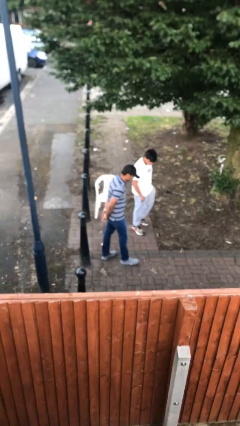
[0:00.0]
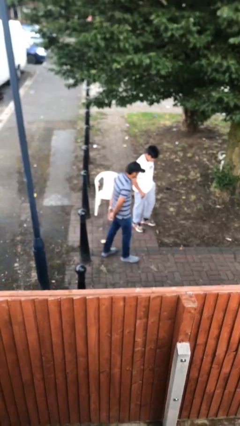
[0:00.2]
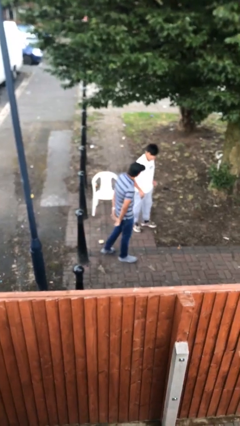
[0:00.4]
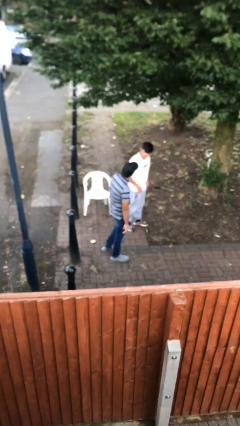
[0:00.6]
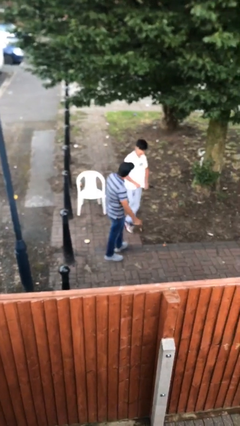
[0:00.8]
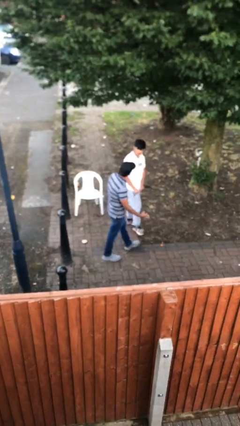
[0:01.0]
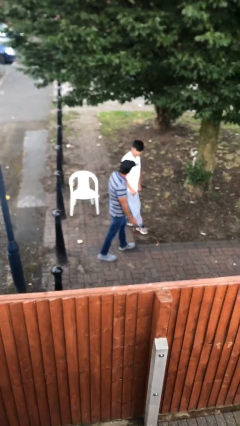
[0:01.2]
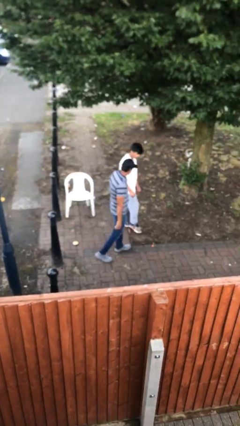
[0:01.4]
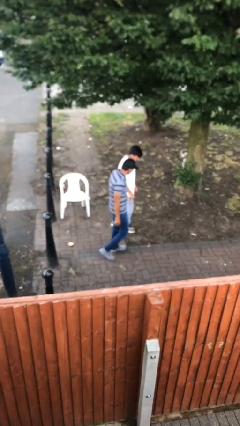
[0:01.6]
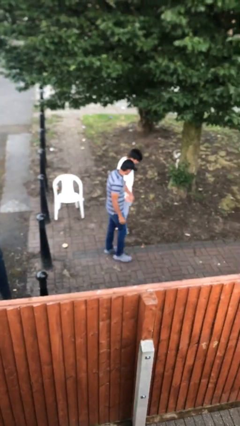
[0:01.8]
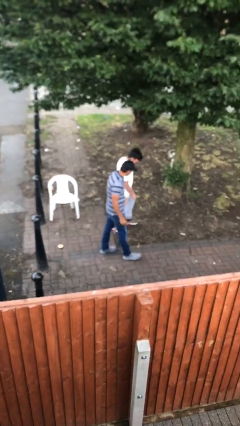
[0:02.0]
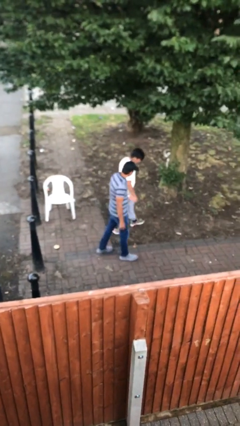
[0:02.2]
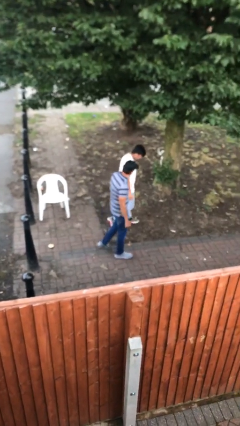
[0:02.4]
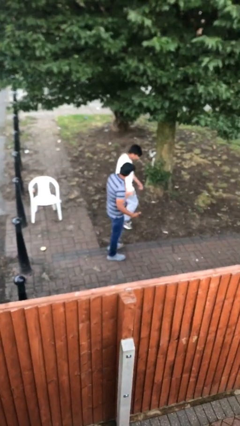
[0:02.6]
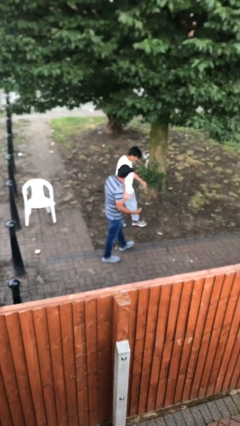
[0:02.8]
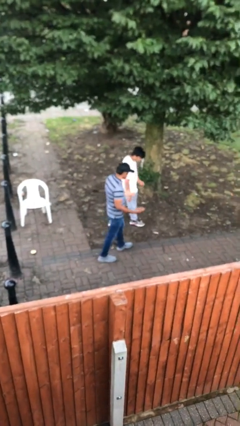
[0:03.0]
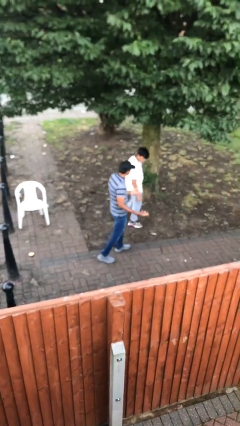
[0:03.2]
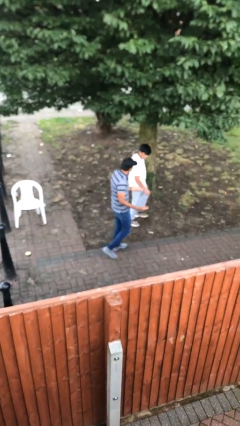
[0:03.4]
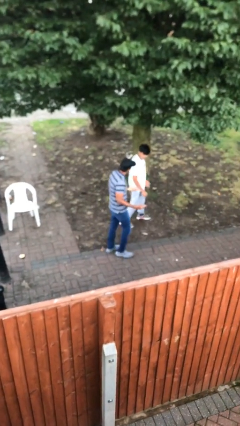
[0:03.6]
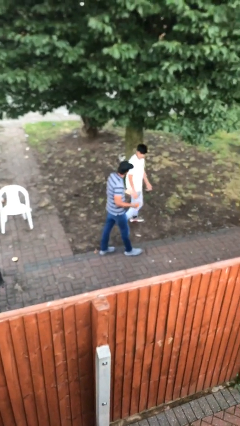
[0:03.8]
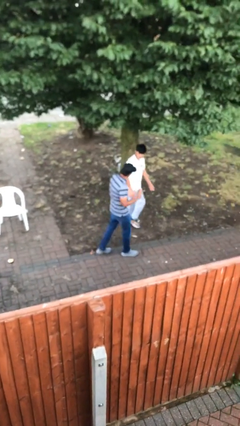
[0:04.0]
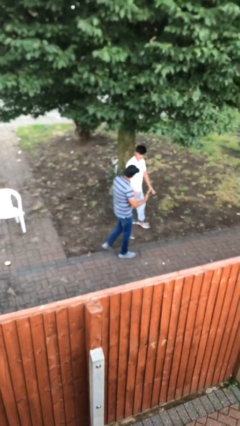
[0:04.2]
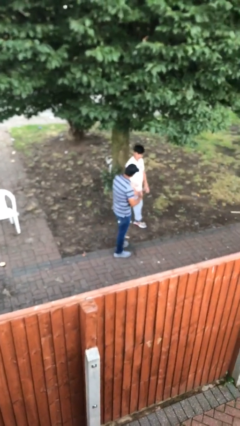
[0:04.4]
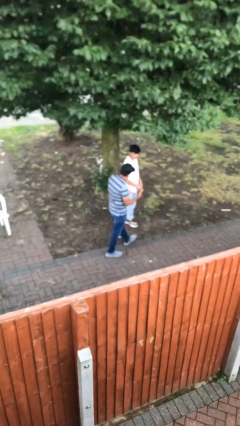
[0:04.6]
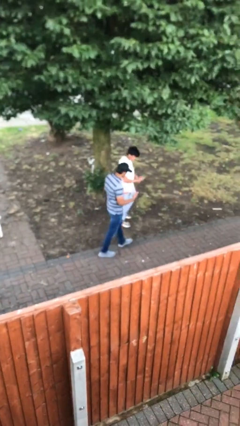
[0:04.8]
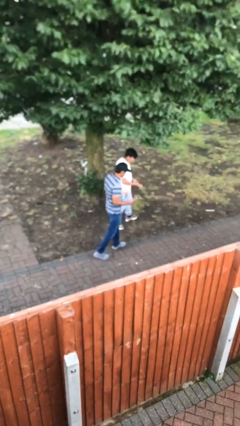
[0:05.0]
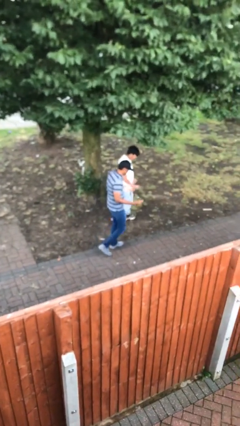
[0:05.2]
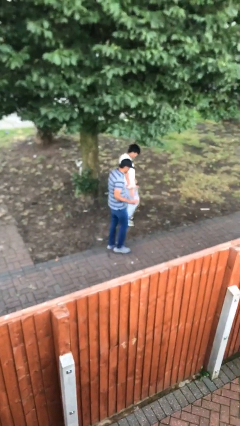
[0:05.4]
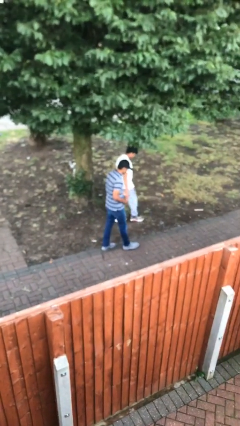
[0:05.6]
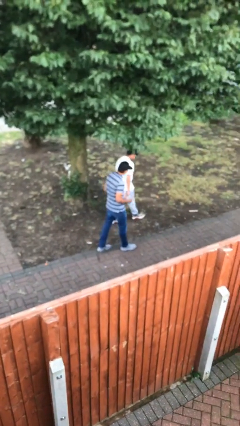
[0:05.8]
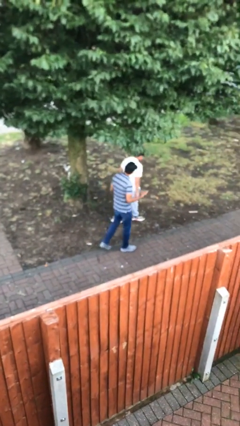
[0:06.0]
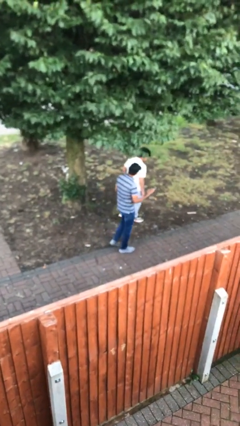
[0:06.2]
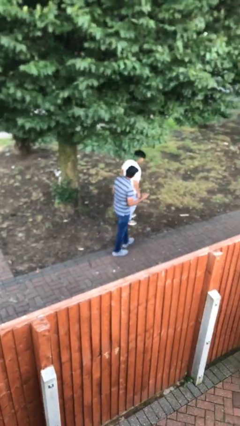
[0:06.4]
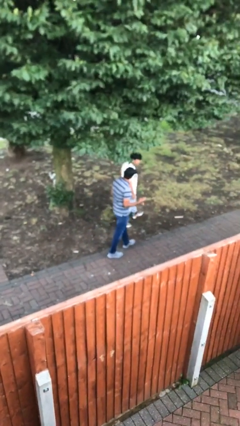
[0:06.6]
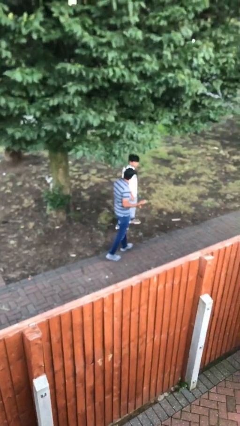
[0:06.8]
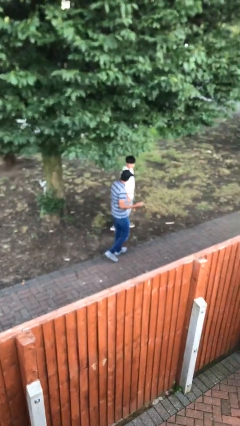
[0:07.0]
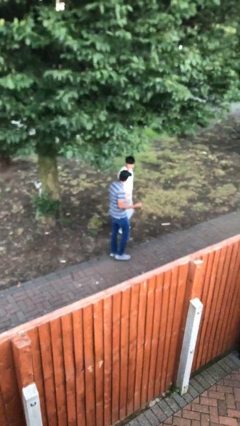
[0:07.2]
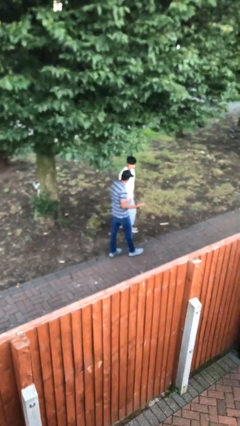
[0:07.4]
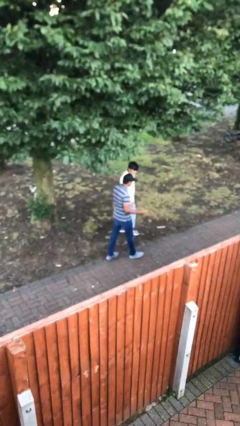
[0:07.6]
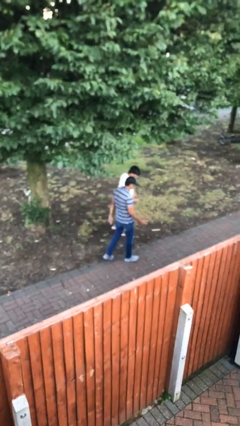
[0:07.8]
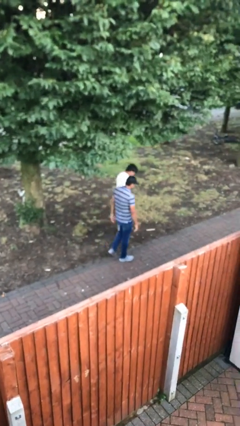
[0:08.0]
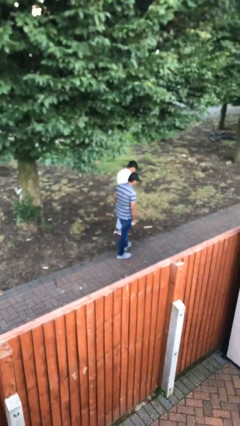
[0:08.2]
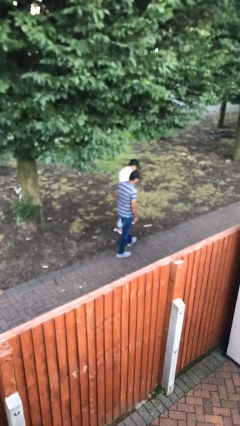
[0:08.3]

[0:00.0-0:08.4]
person talks to person

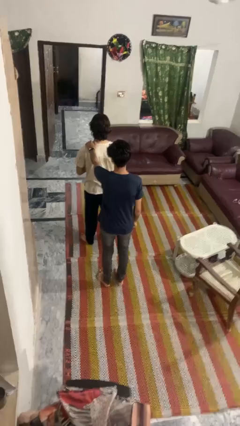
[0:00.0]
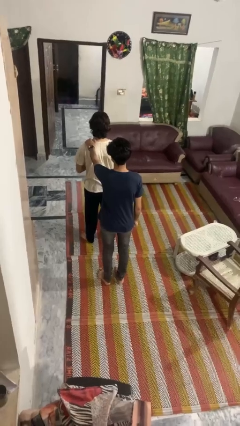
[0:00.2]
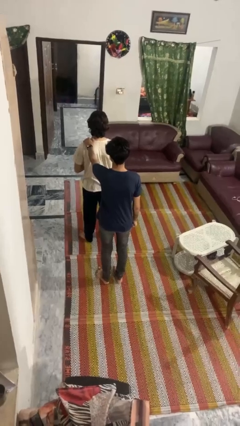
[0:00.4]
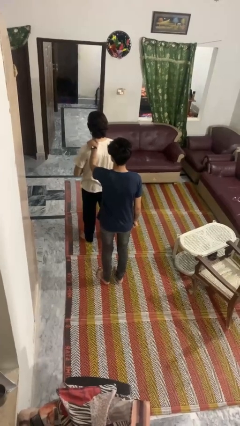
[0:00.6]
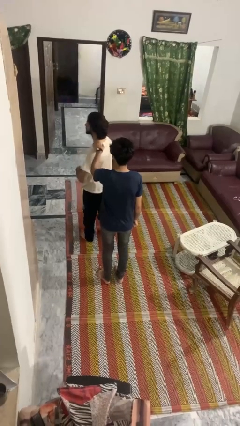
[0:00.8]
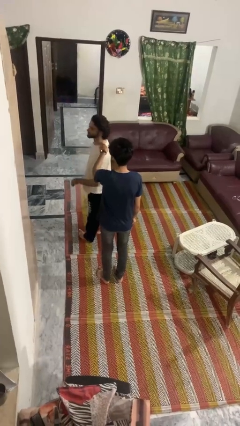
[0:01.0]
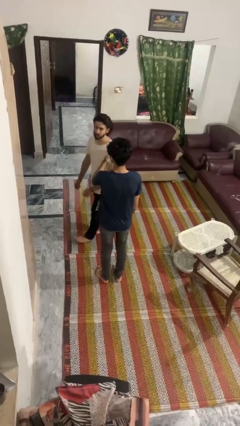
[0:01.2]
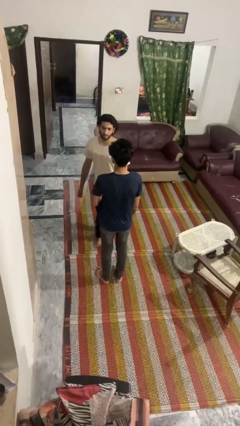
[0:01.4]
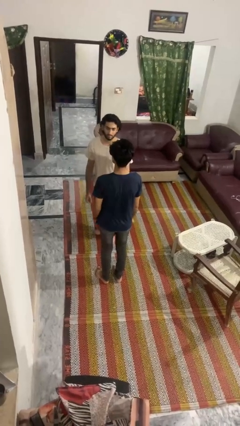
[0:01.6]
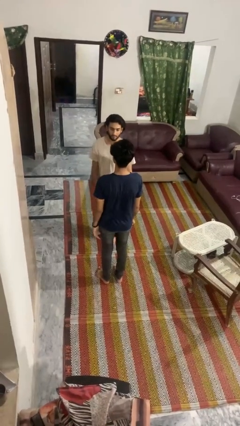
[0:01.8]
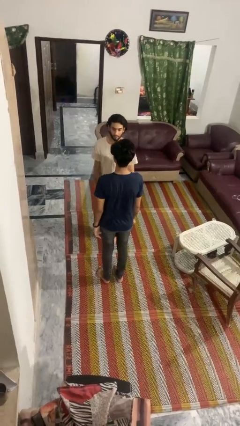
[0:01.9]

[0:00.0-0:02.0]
person spins person around

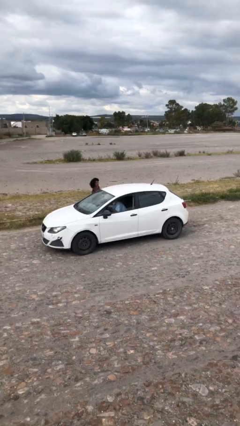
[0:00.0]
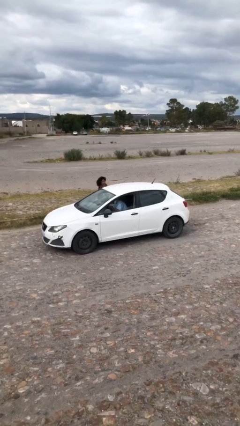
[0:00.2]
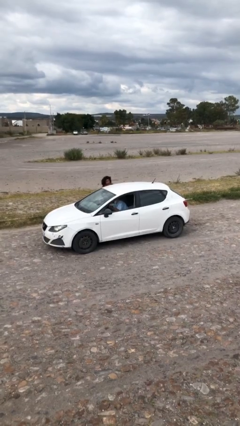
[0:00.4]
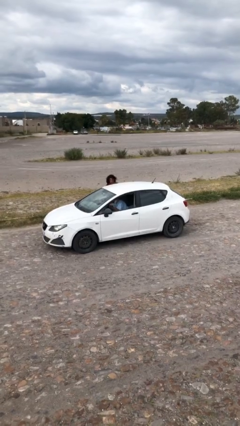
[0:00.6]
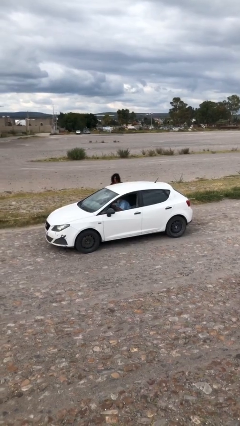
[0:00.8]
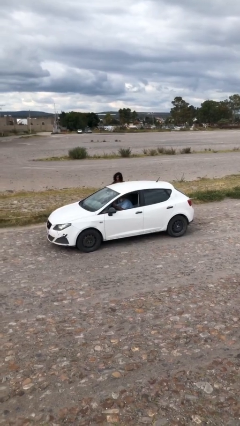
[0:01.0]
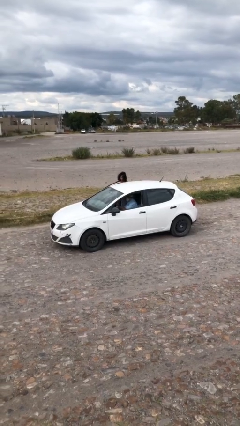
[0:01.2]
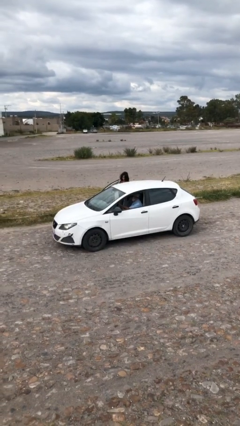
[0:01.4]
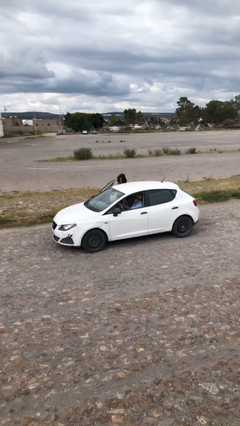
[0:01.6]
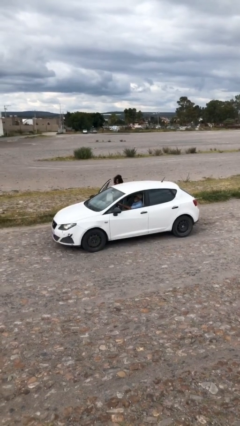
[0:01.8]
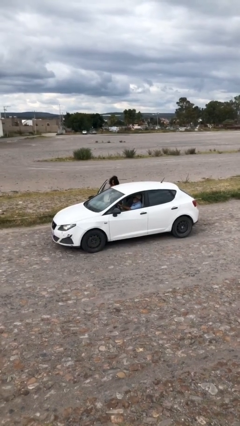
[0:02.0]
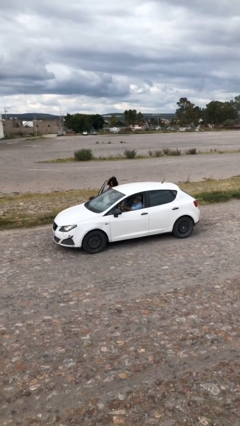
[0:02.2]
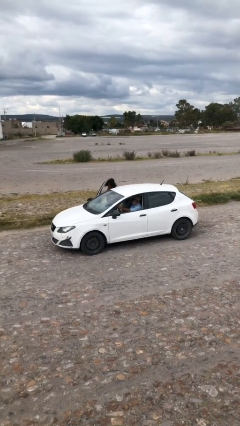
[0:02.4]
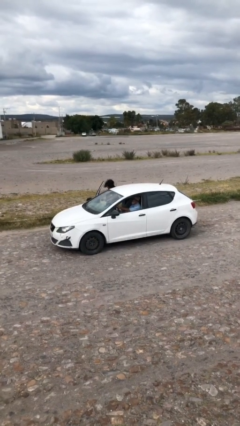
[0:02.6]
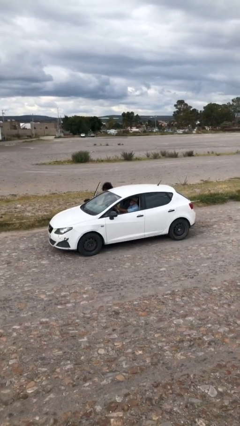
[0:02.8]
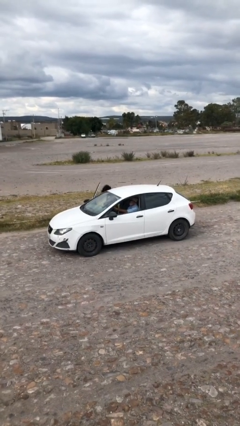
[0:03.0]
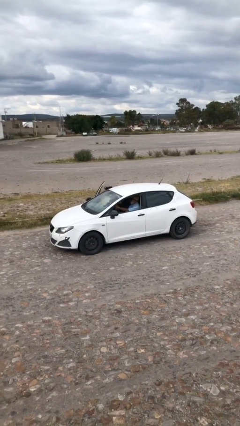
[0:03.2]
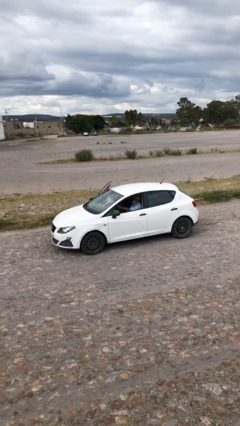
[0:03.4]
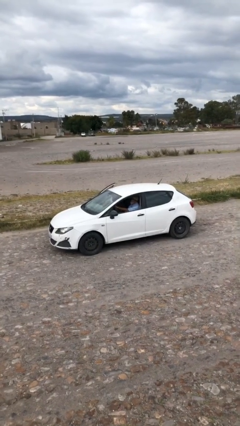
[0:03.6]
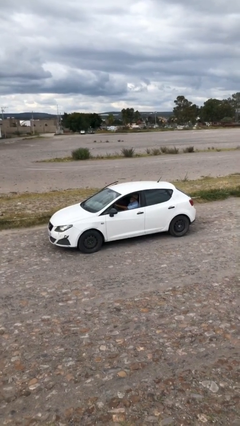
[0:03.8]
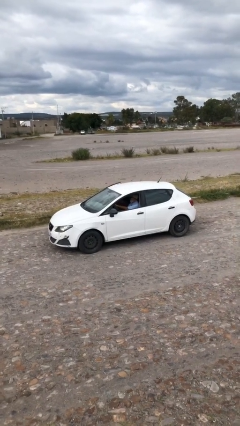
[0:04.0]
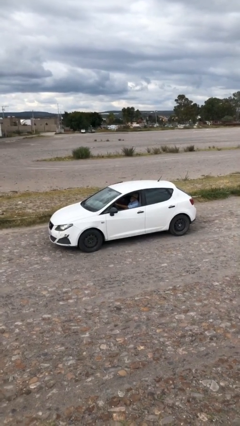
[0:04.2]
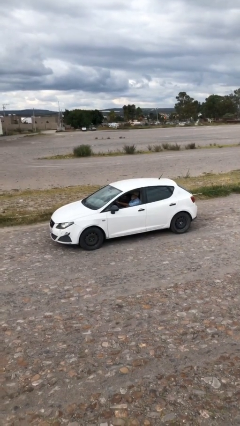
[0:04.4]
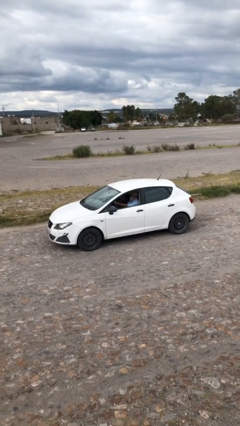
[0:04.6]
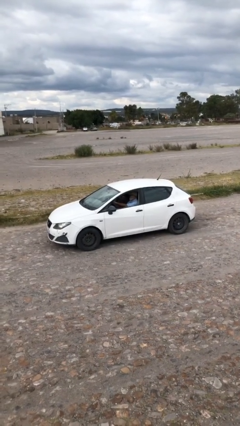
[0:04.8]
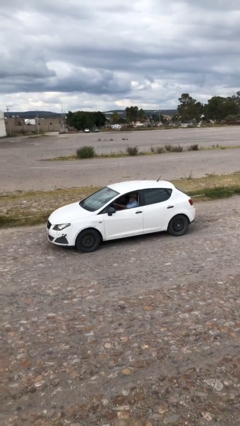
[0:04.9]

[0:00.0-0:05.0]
car picks up person

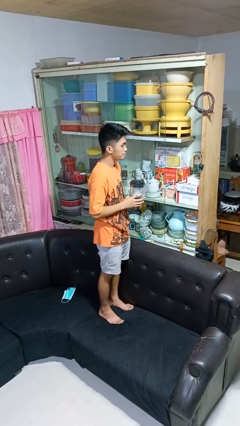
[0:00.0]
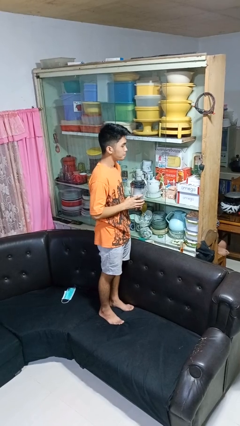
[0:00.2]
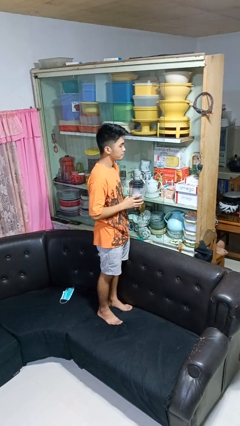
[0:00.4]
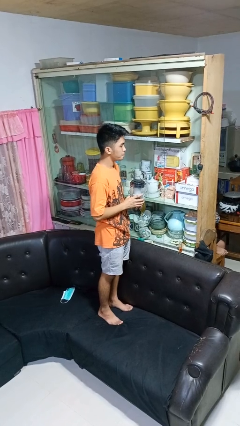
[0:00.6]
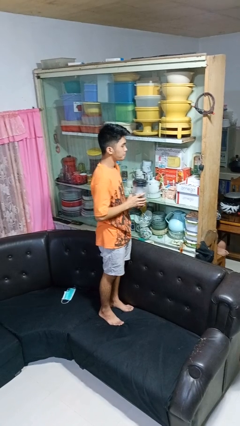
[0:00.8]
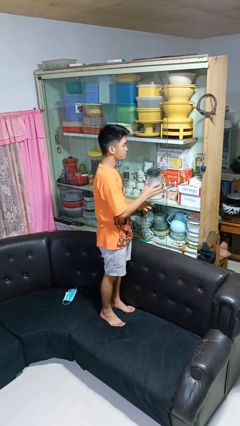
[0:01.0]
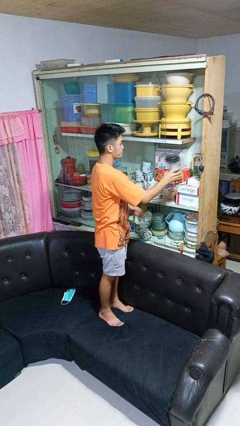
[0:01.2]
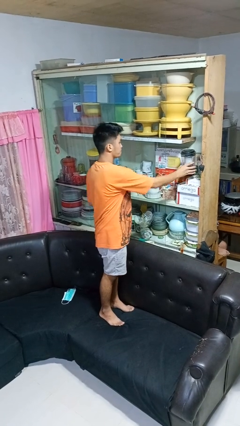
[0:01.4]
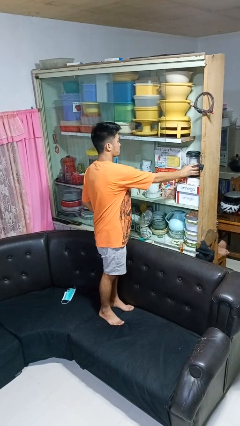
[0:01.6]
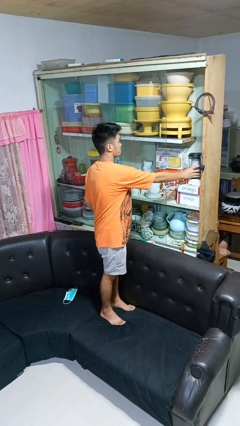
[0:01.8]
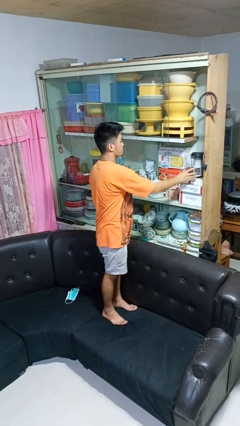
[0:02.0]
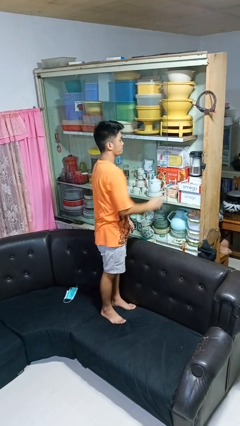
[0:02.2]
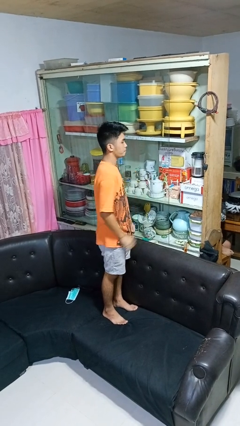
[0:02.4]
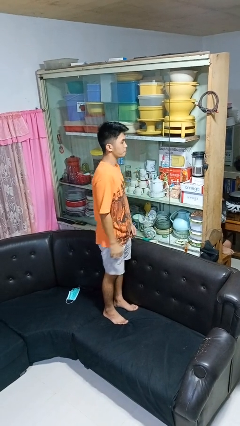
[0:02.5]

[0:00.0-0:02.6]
person puts down object into cabinet
